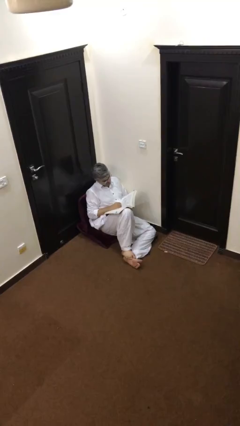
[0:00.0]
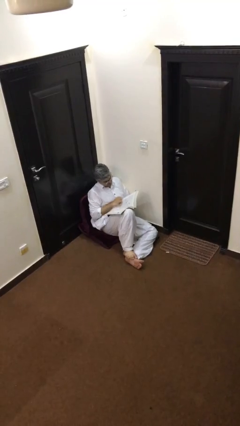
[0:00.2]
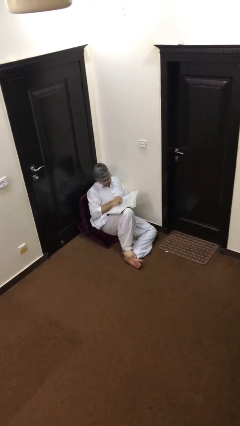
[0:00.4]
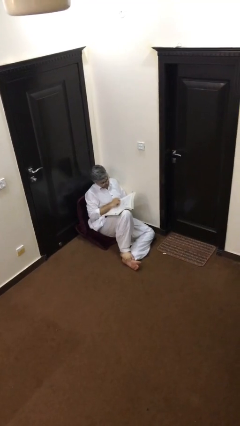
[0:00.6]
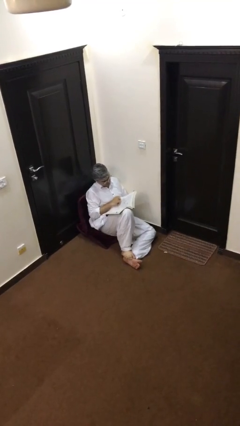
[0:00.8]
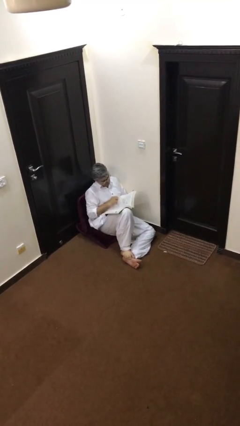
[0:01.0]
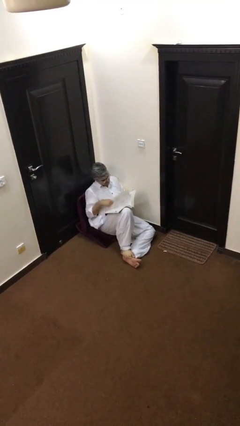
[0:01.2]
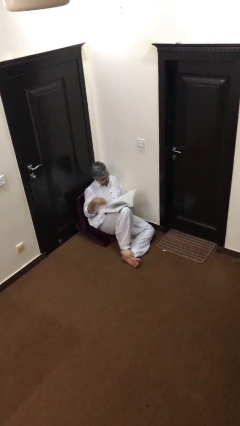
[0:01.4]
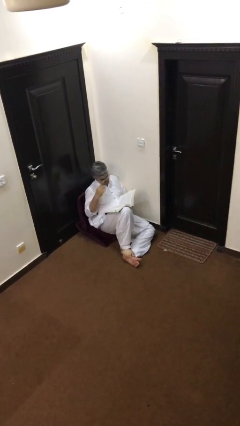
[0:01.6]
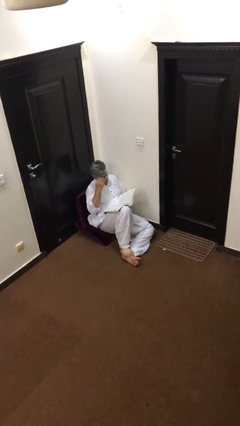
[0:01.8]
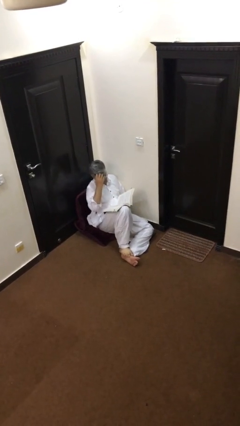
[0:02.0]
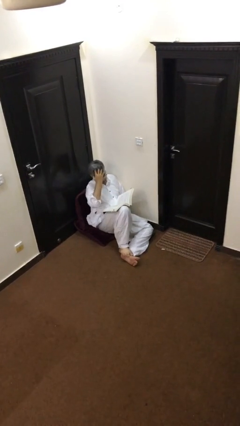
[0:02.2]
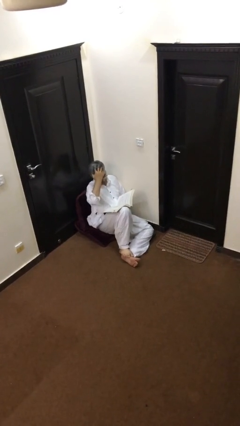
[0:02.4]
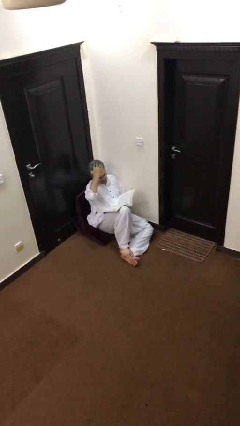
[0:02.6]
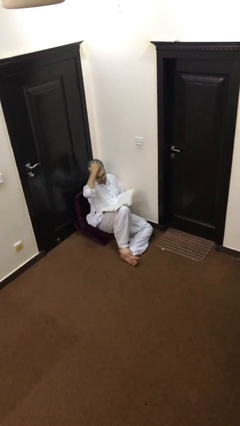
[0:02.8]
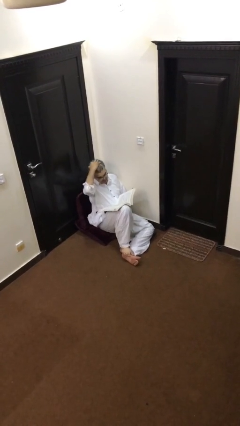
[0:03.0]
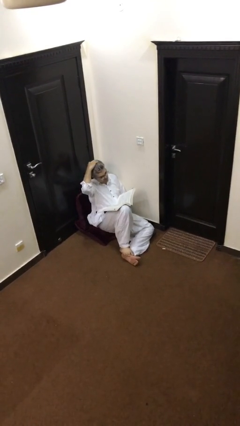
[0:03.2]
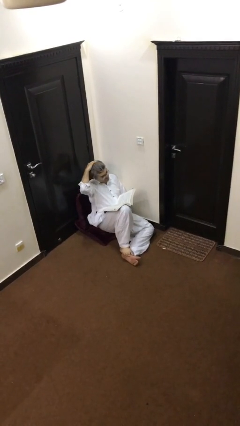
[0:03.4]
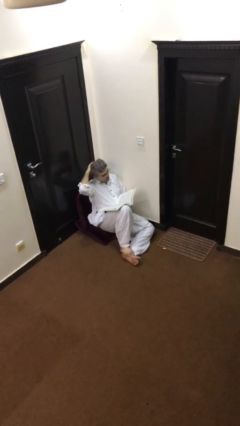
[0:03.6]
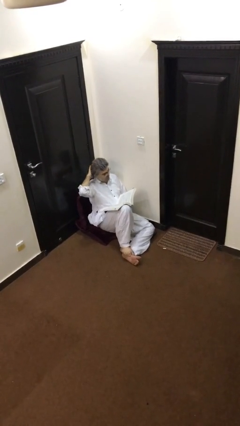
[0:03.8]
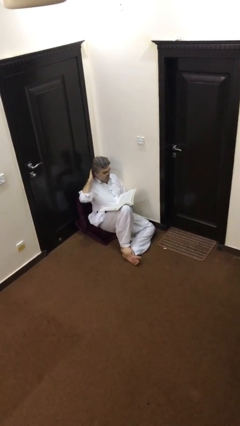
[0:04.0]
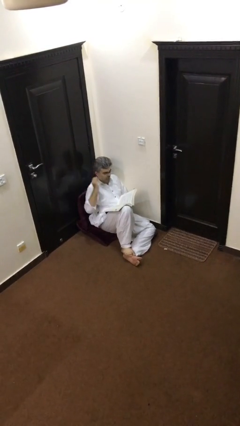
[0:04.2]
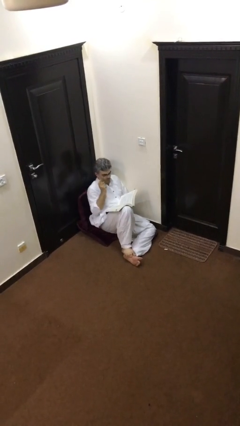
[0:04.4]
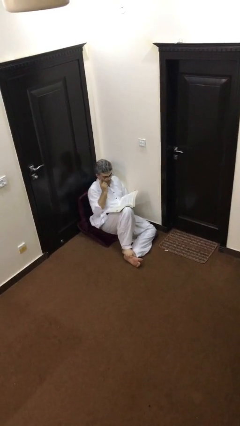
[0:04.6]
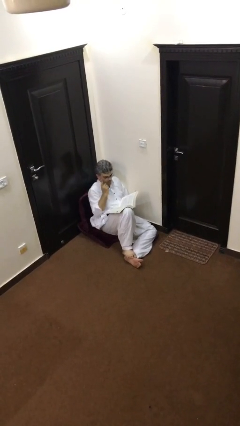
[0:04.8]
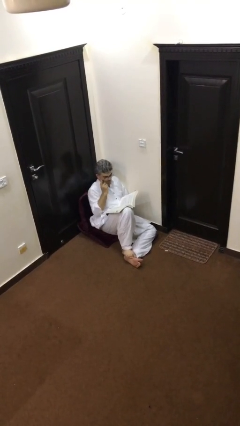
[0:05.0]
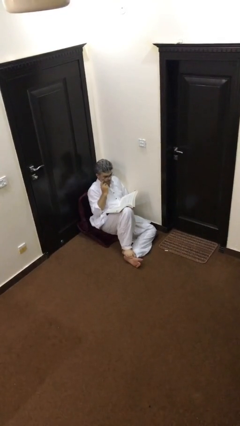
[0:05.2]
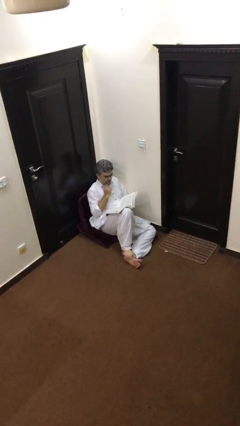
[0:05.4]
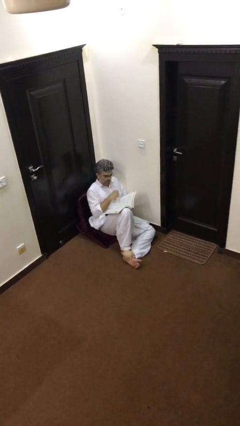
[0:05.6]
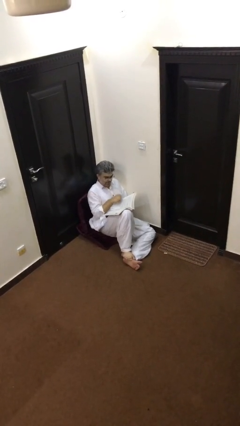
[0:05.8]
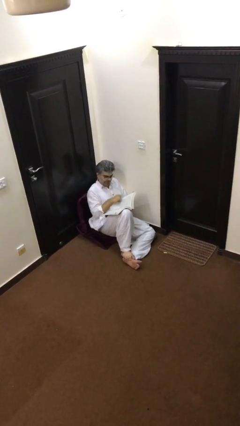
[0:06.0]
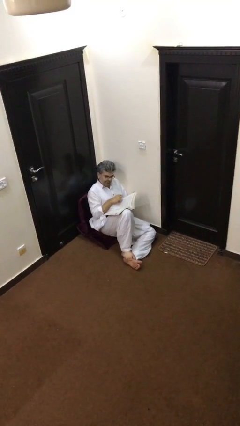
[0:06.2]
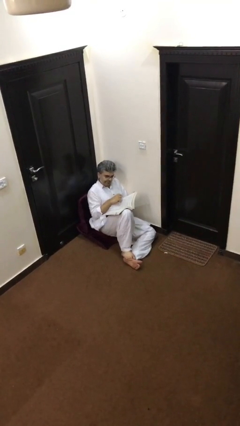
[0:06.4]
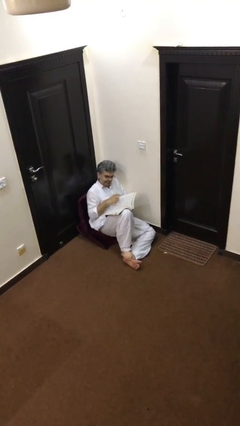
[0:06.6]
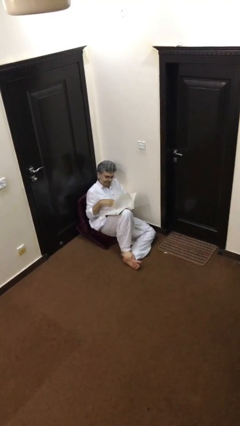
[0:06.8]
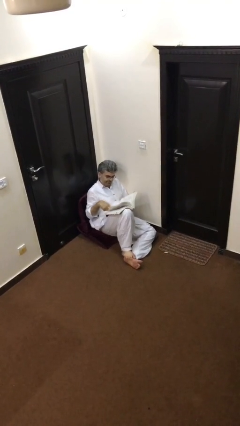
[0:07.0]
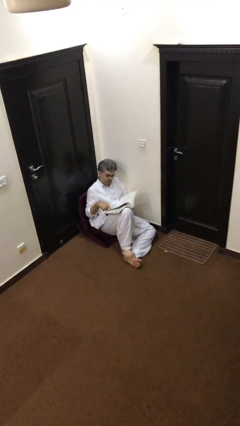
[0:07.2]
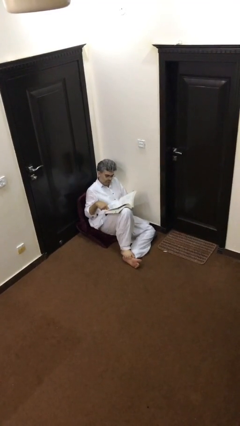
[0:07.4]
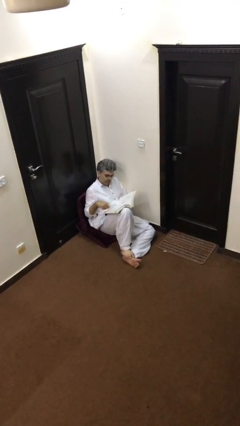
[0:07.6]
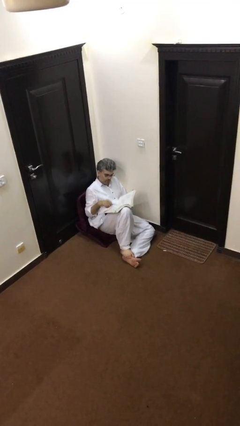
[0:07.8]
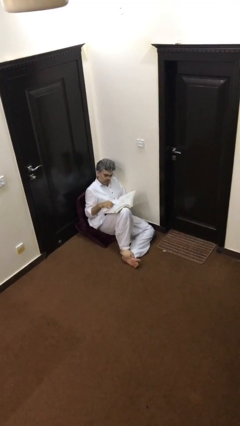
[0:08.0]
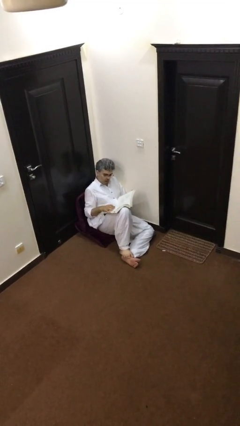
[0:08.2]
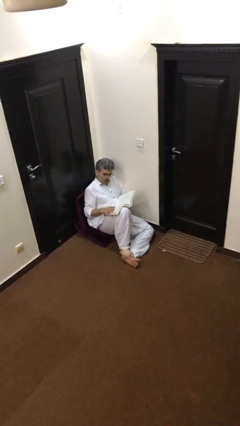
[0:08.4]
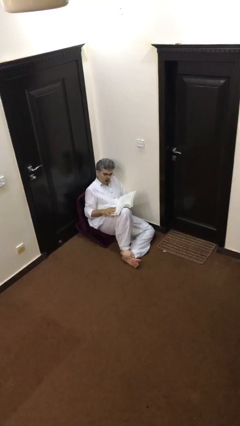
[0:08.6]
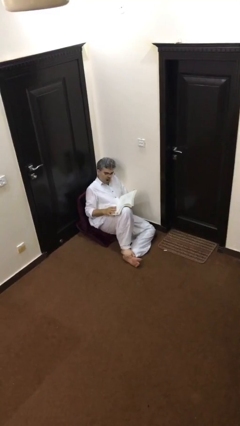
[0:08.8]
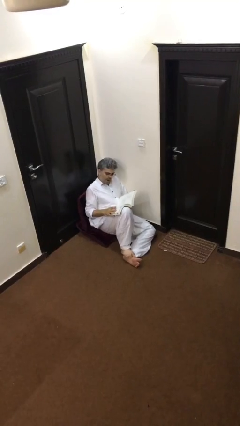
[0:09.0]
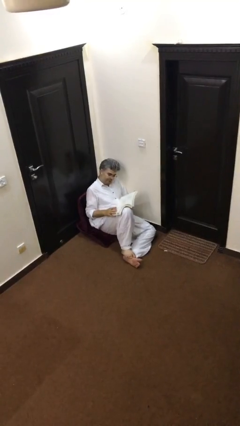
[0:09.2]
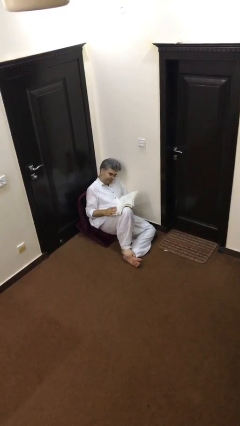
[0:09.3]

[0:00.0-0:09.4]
person reads document

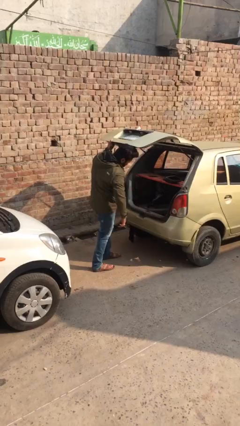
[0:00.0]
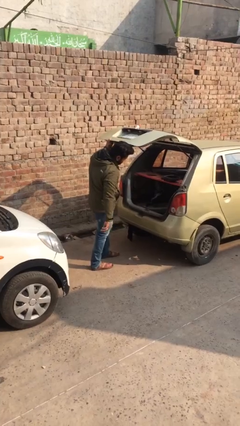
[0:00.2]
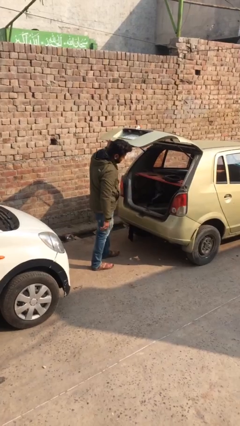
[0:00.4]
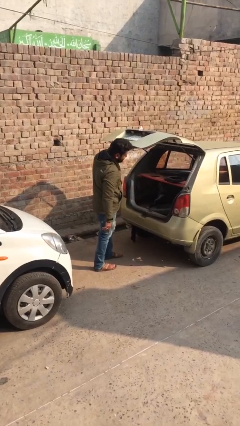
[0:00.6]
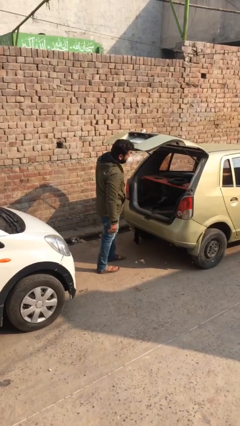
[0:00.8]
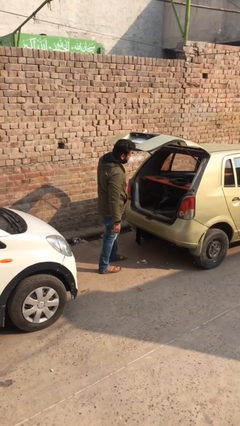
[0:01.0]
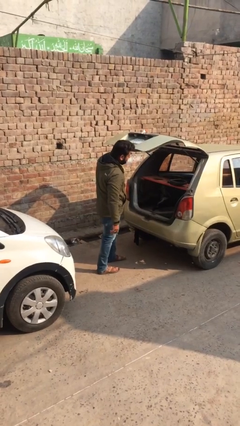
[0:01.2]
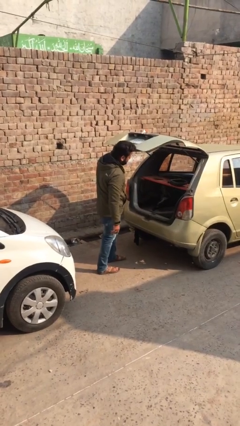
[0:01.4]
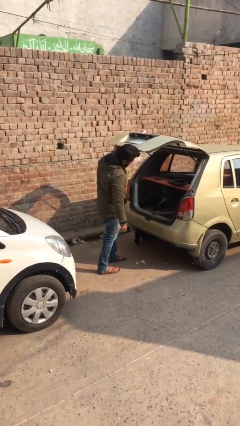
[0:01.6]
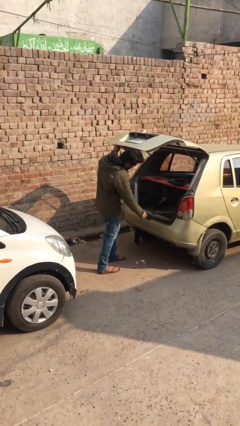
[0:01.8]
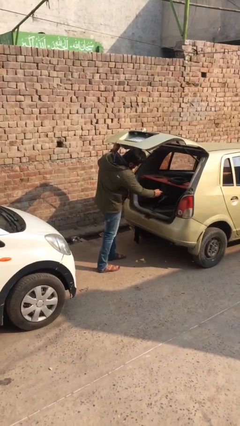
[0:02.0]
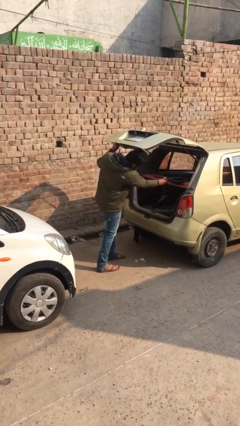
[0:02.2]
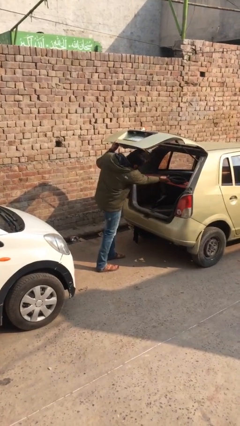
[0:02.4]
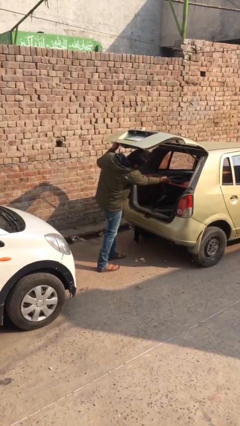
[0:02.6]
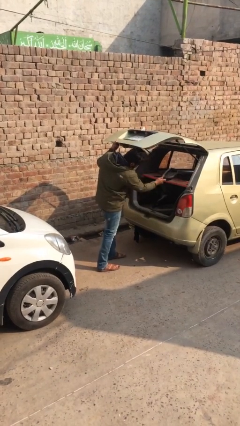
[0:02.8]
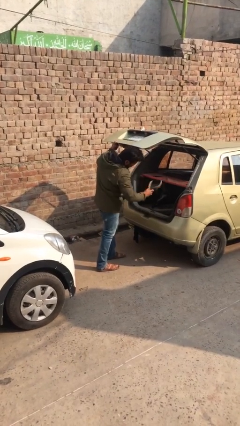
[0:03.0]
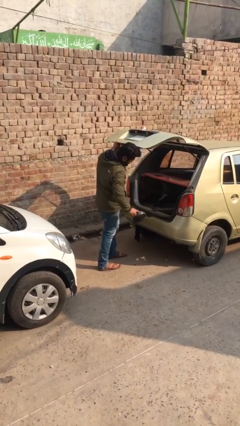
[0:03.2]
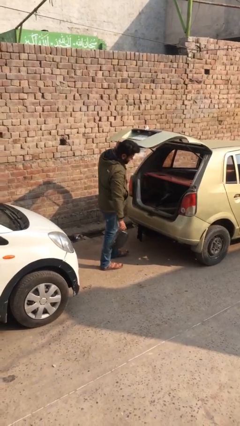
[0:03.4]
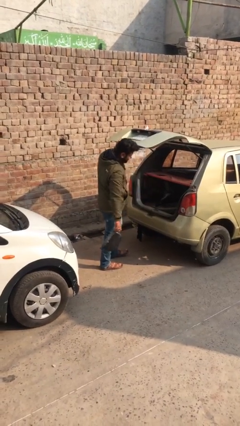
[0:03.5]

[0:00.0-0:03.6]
person unloads car

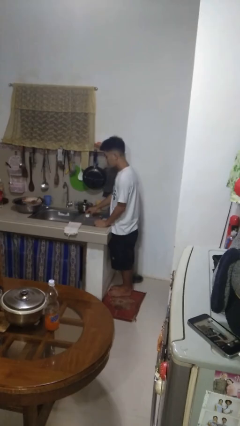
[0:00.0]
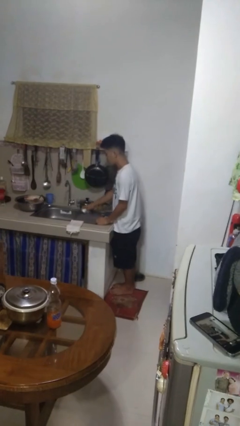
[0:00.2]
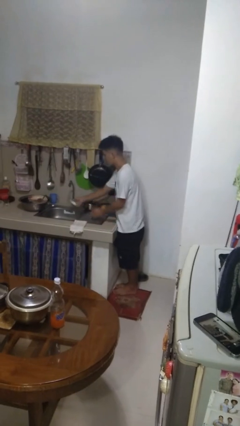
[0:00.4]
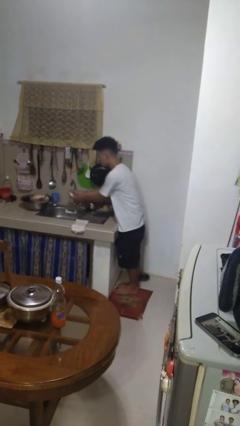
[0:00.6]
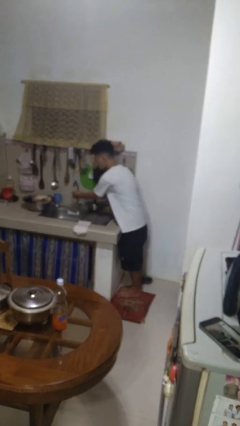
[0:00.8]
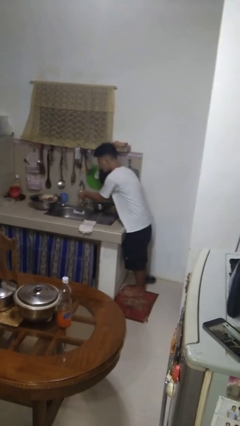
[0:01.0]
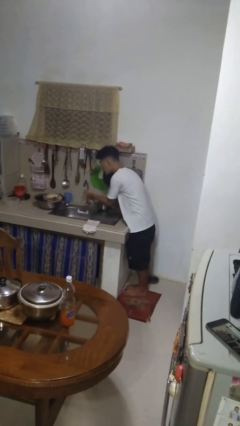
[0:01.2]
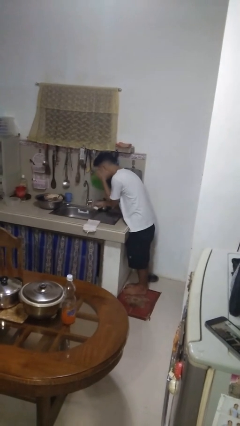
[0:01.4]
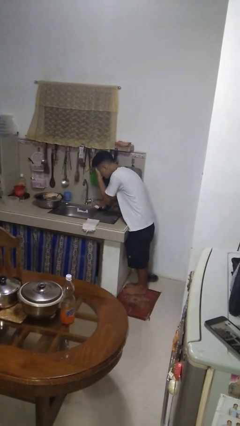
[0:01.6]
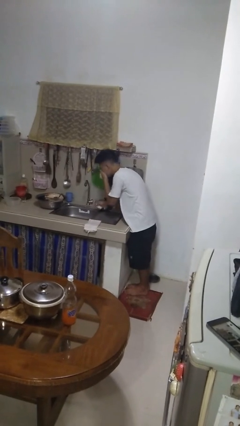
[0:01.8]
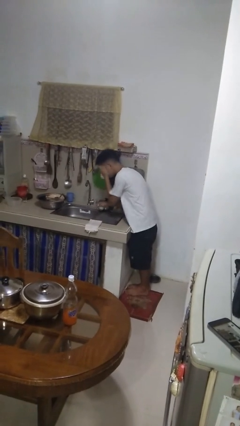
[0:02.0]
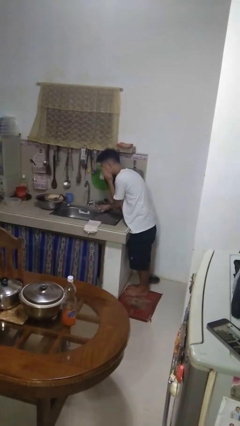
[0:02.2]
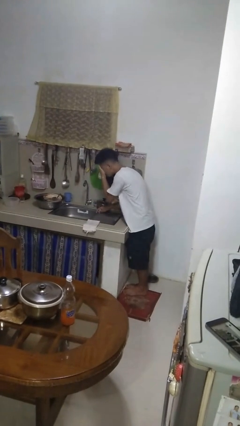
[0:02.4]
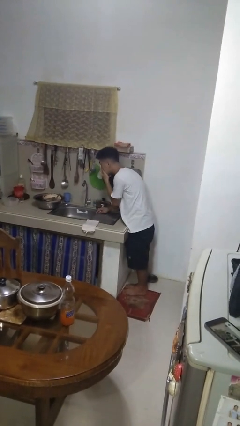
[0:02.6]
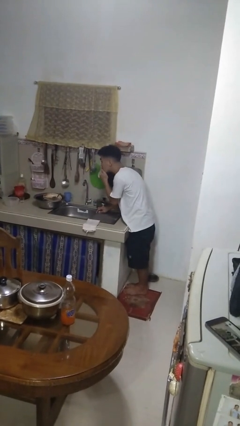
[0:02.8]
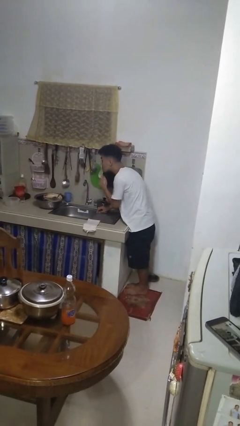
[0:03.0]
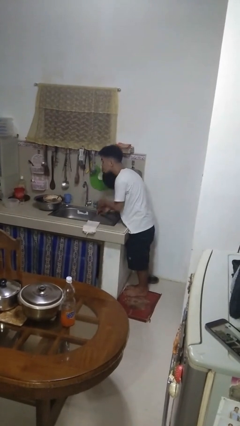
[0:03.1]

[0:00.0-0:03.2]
person washes face

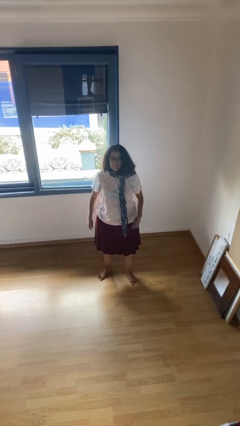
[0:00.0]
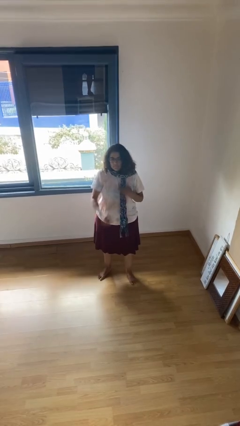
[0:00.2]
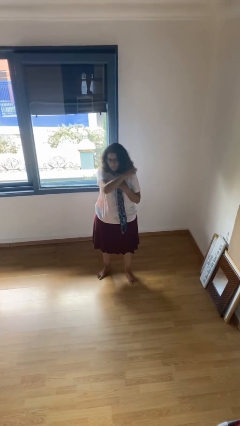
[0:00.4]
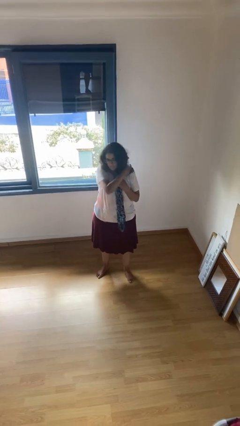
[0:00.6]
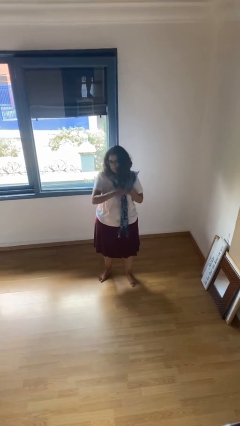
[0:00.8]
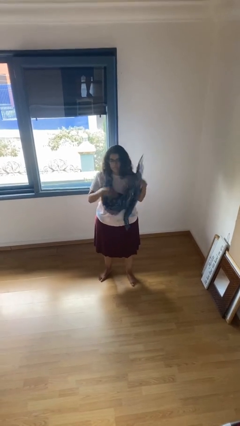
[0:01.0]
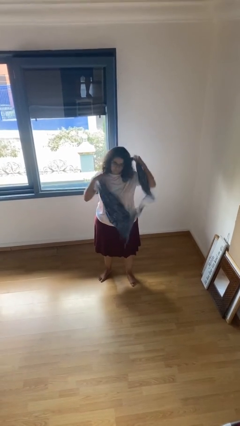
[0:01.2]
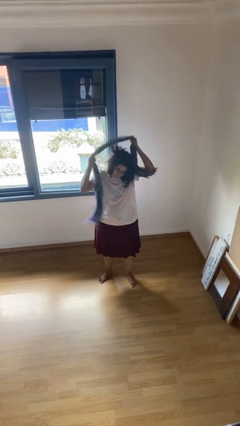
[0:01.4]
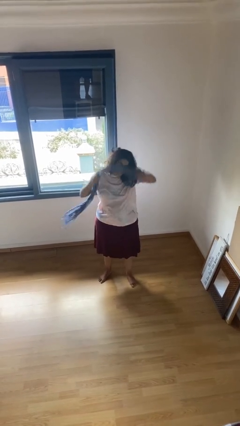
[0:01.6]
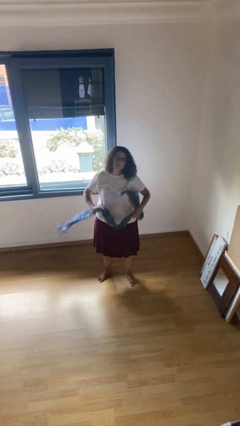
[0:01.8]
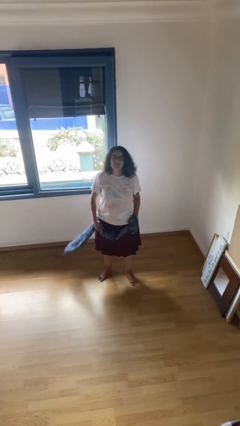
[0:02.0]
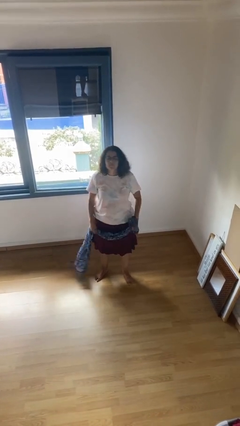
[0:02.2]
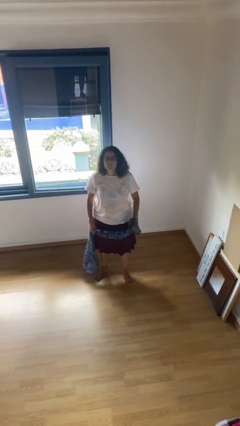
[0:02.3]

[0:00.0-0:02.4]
person takes off scarf
